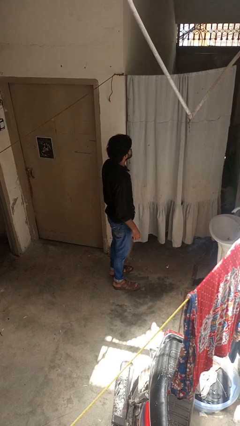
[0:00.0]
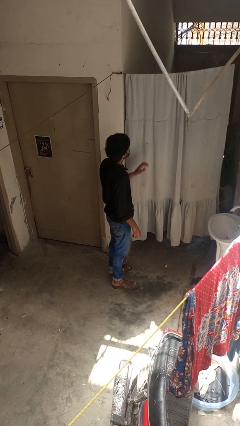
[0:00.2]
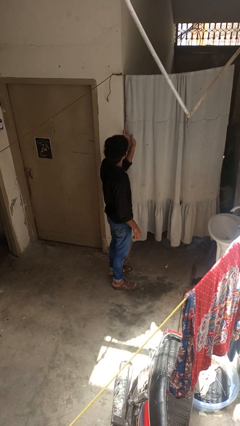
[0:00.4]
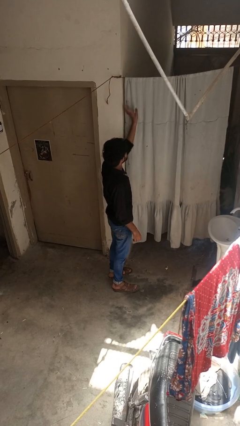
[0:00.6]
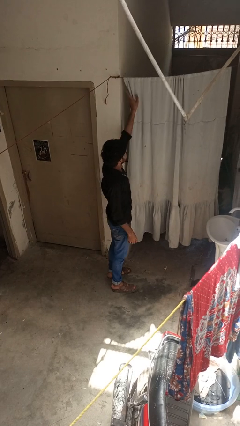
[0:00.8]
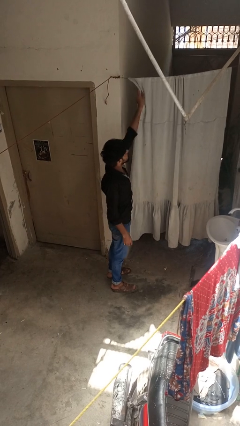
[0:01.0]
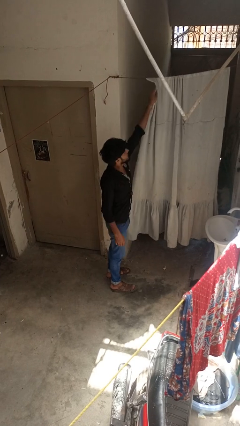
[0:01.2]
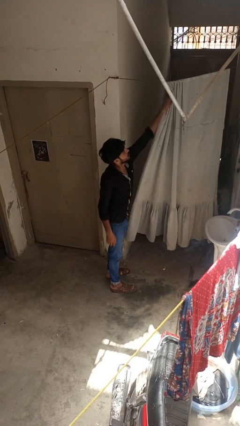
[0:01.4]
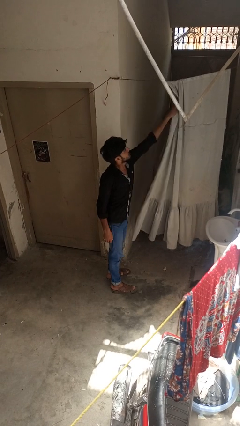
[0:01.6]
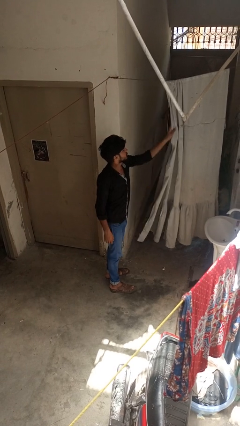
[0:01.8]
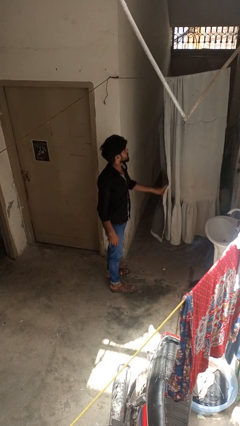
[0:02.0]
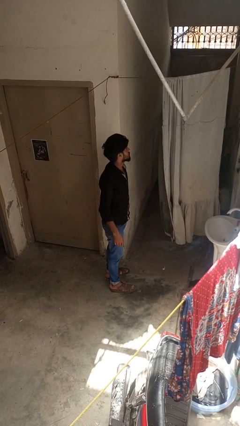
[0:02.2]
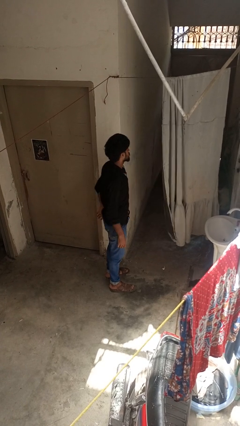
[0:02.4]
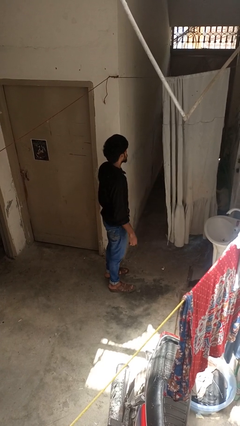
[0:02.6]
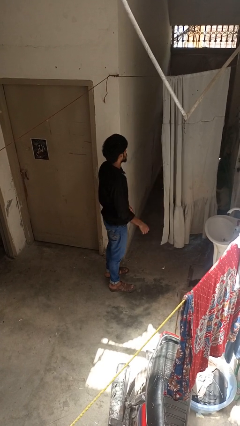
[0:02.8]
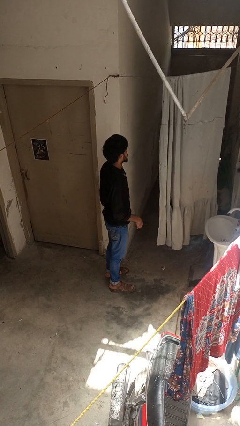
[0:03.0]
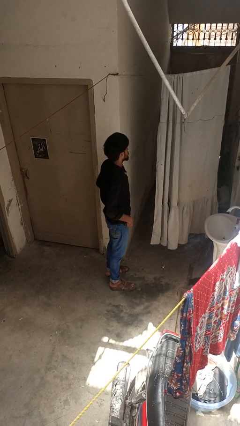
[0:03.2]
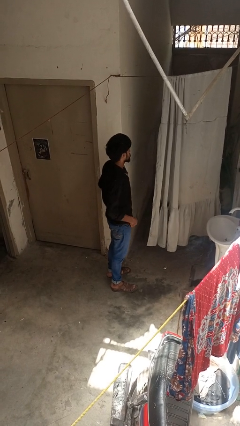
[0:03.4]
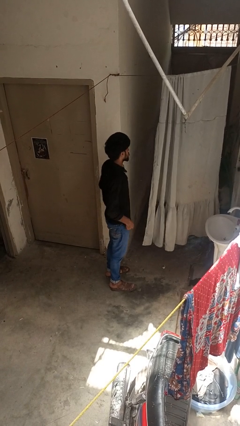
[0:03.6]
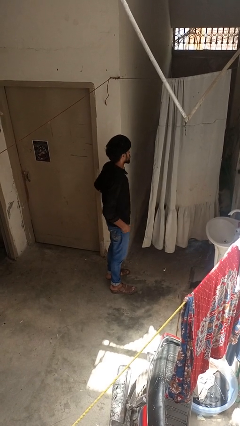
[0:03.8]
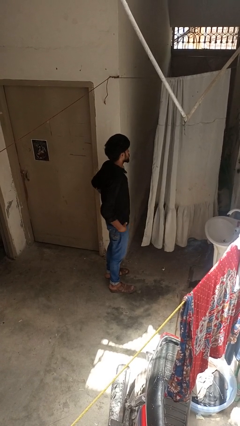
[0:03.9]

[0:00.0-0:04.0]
person opens curtains

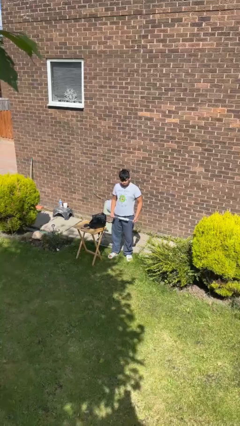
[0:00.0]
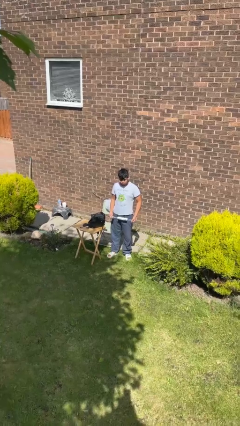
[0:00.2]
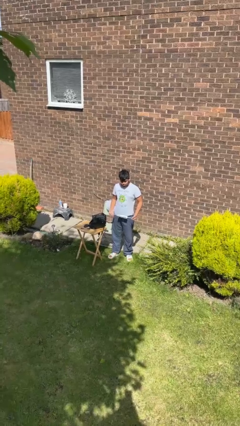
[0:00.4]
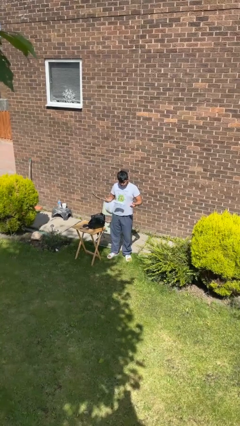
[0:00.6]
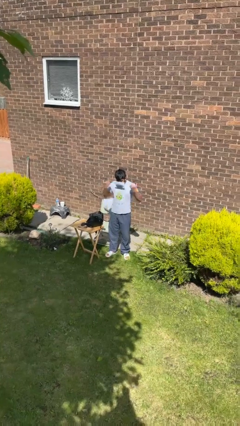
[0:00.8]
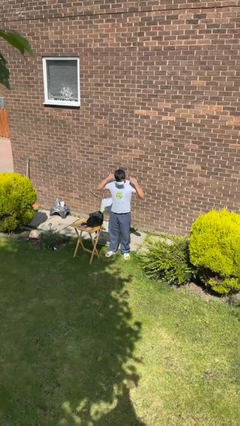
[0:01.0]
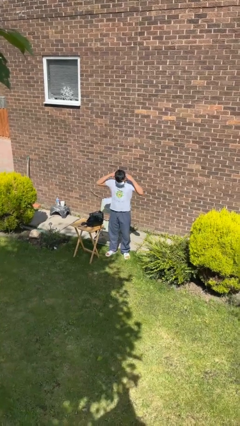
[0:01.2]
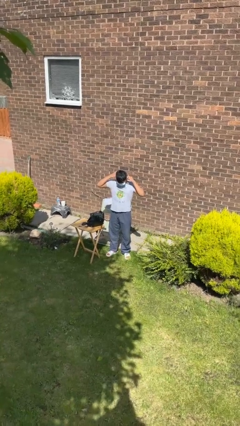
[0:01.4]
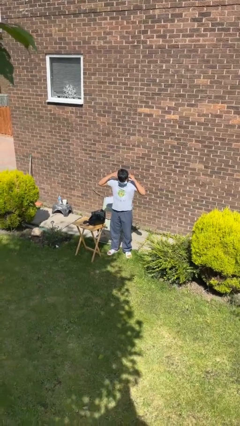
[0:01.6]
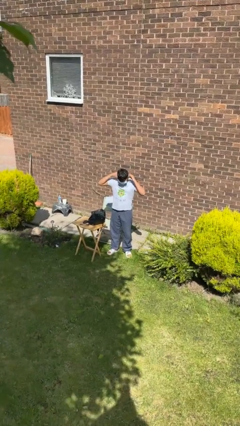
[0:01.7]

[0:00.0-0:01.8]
person puts on facemask

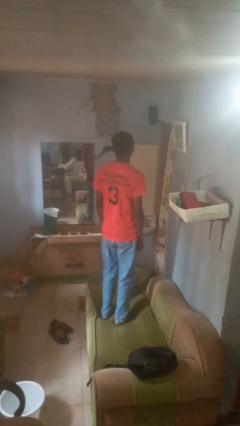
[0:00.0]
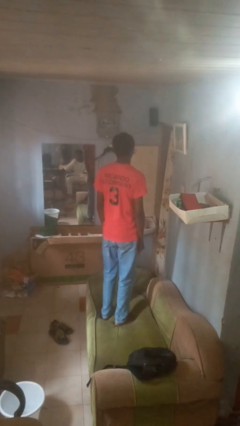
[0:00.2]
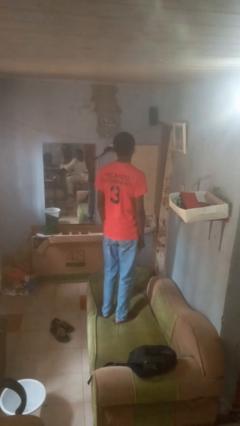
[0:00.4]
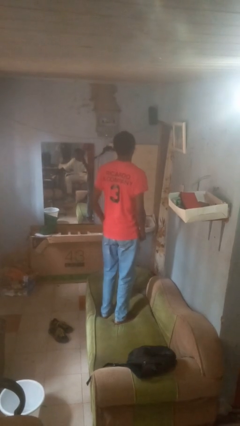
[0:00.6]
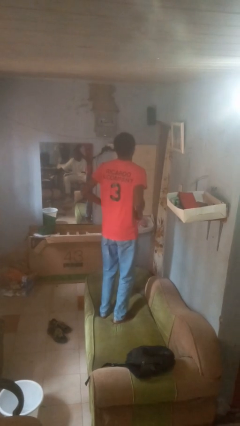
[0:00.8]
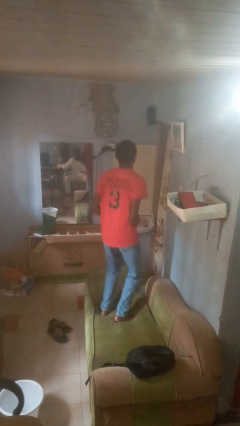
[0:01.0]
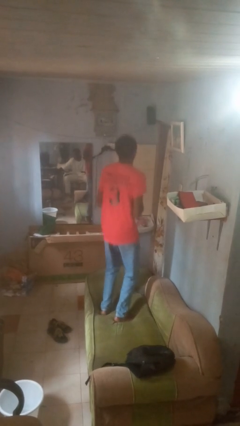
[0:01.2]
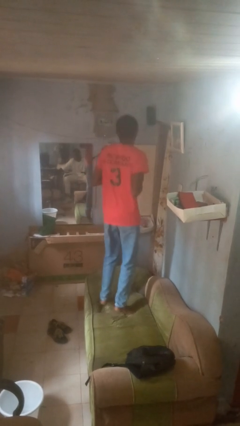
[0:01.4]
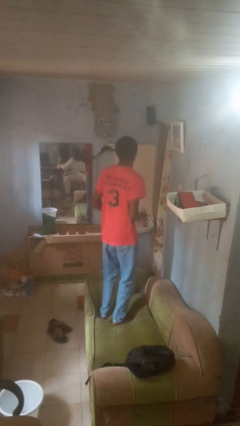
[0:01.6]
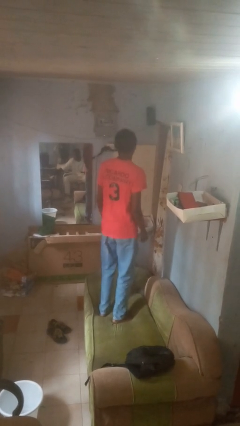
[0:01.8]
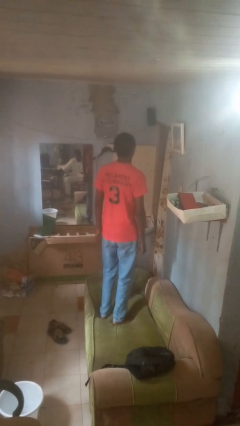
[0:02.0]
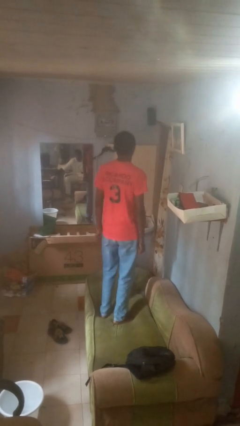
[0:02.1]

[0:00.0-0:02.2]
person jumps on couch

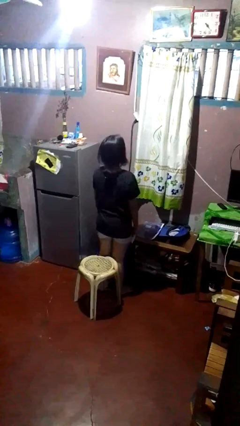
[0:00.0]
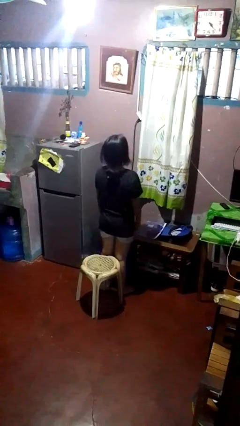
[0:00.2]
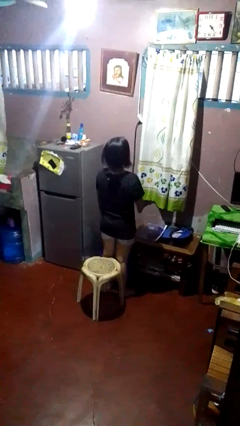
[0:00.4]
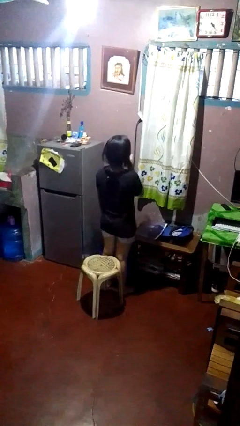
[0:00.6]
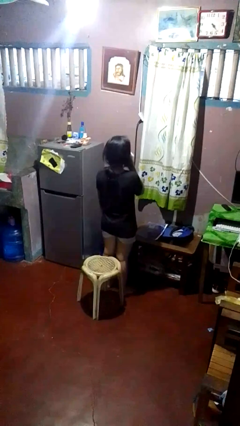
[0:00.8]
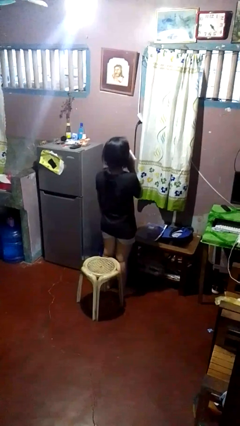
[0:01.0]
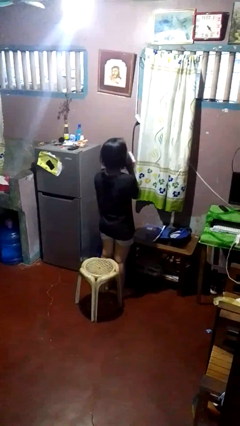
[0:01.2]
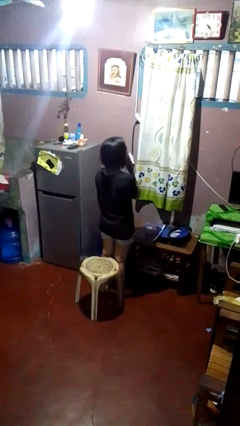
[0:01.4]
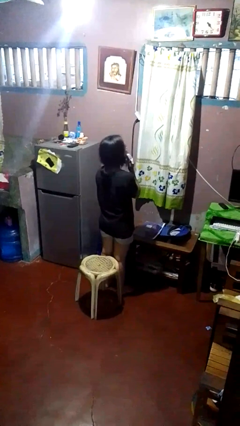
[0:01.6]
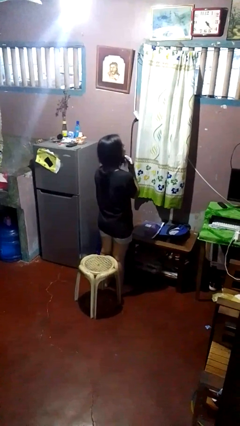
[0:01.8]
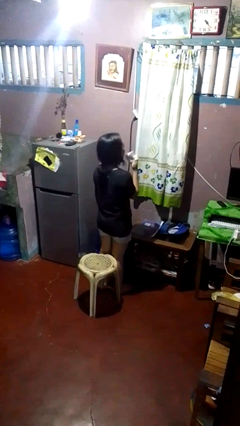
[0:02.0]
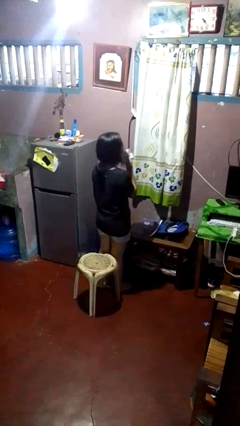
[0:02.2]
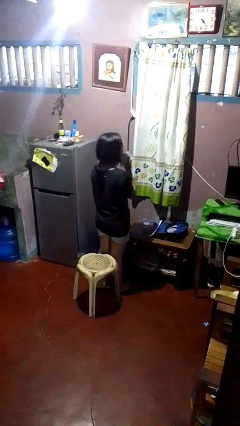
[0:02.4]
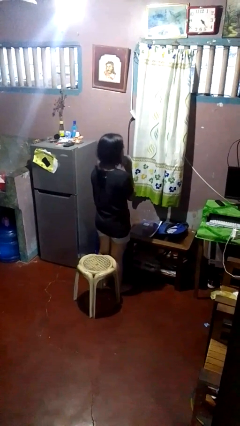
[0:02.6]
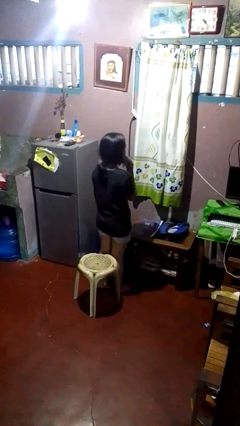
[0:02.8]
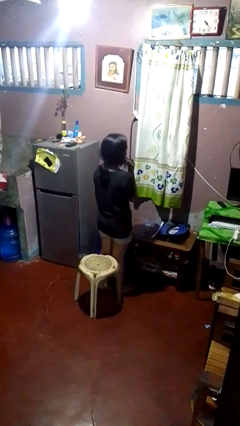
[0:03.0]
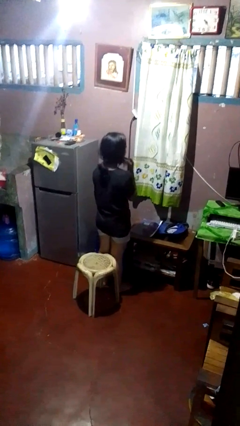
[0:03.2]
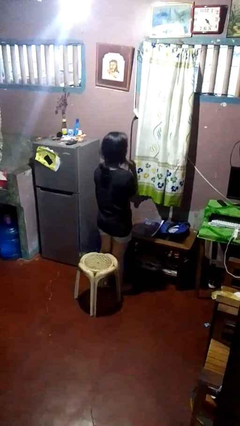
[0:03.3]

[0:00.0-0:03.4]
person wipes mouth with napkin

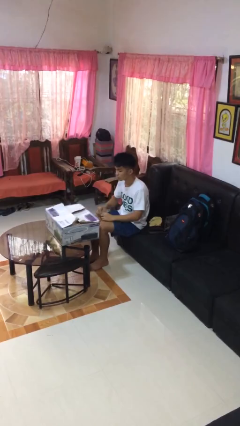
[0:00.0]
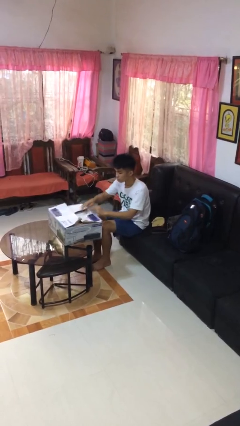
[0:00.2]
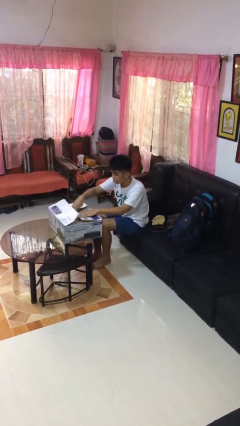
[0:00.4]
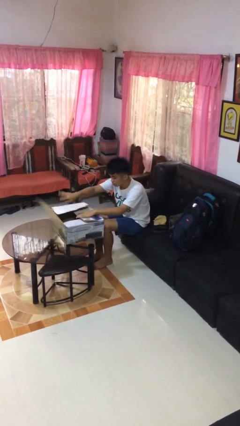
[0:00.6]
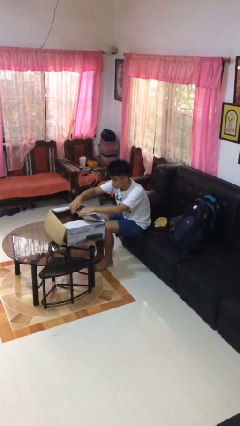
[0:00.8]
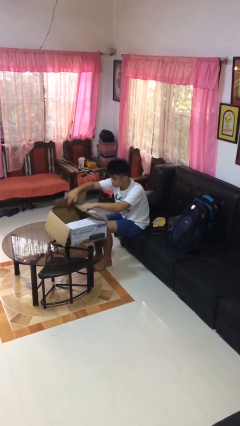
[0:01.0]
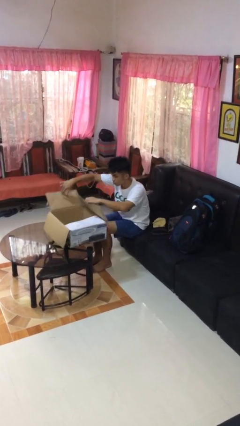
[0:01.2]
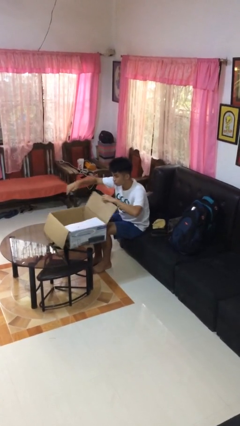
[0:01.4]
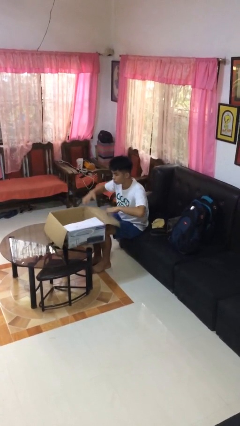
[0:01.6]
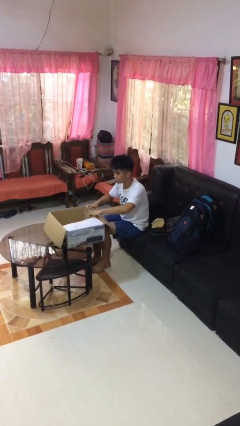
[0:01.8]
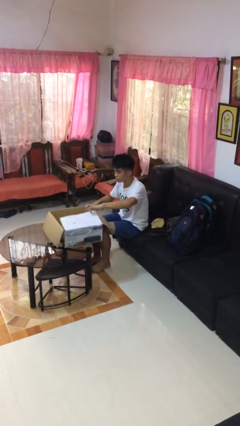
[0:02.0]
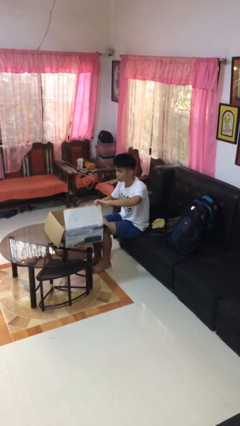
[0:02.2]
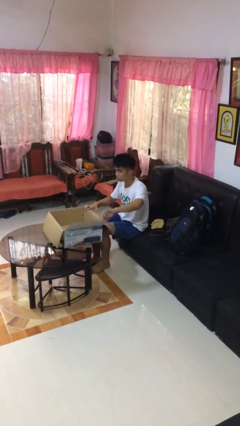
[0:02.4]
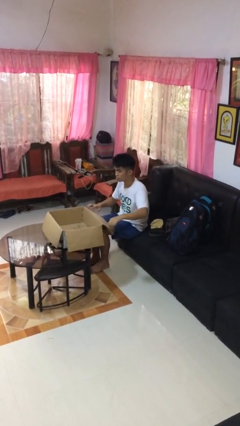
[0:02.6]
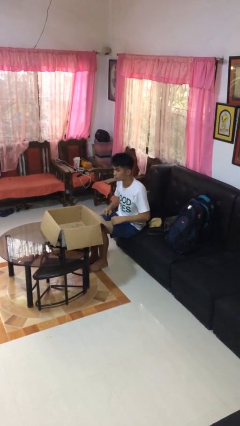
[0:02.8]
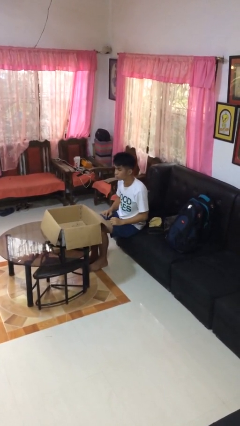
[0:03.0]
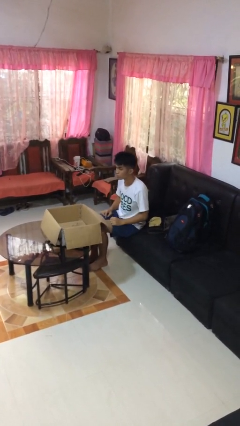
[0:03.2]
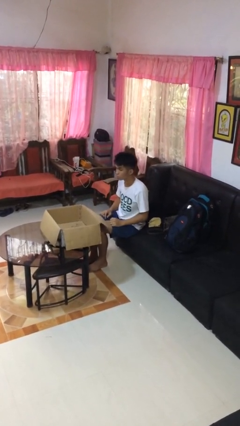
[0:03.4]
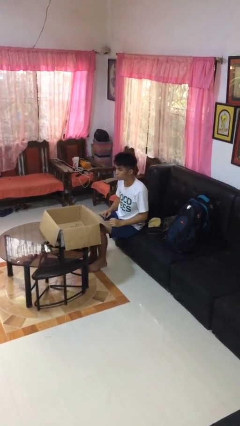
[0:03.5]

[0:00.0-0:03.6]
person opens box

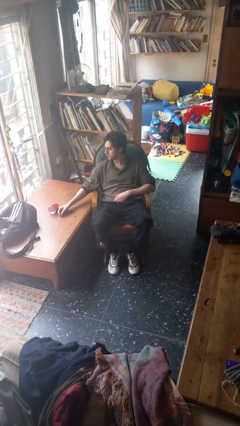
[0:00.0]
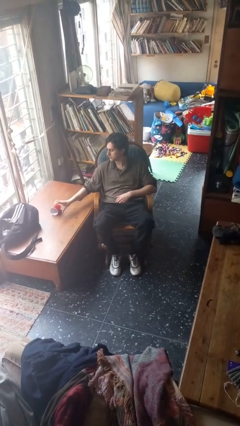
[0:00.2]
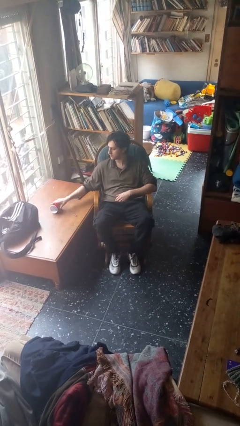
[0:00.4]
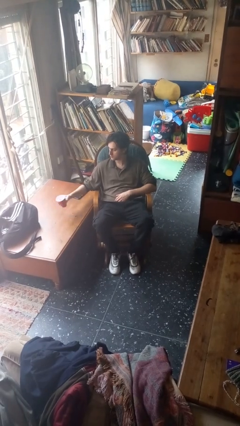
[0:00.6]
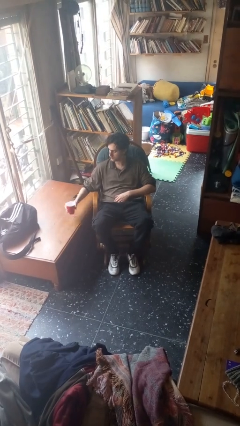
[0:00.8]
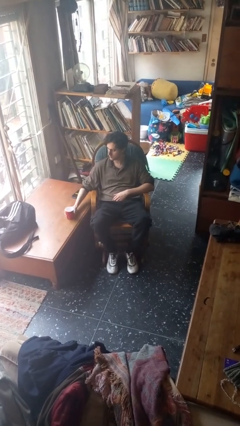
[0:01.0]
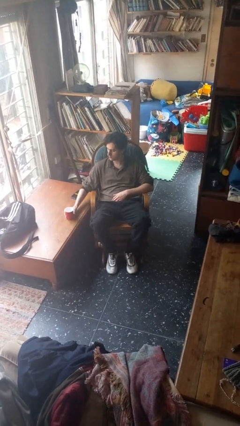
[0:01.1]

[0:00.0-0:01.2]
person sets upright glass

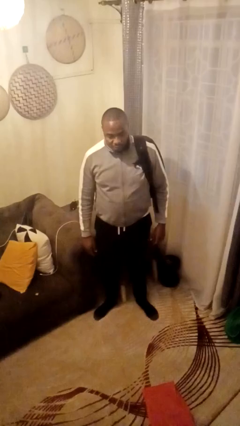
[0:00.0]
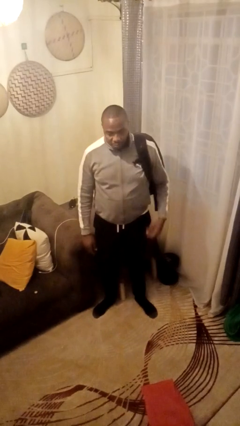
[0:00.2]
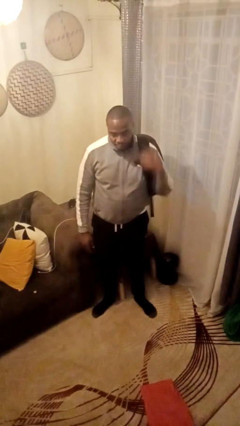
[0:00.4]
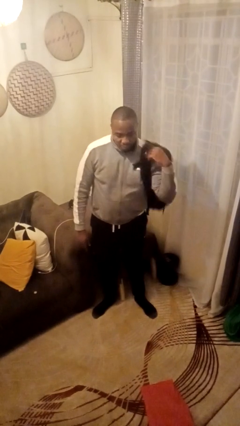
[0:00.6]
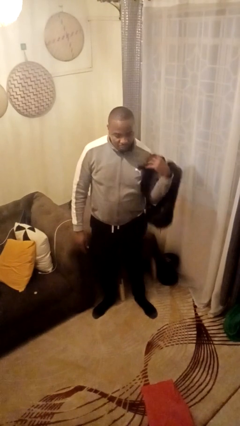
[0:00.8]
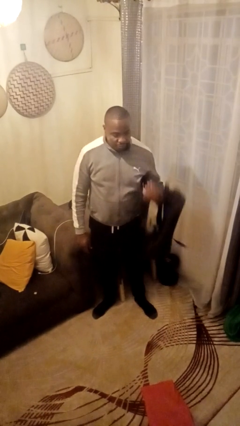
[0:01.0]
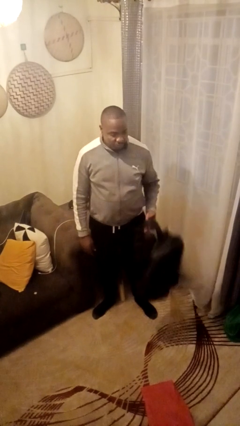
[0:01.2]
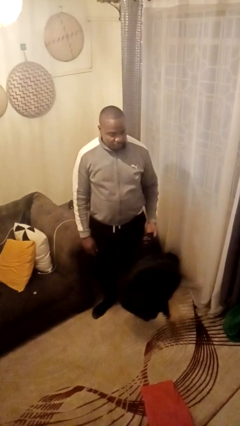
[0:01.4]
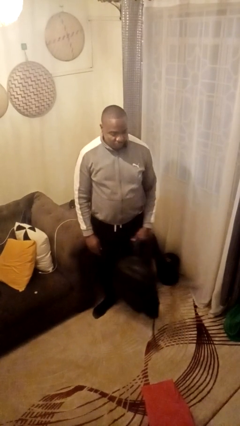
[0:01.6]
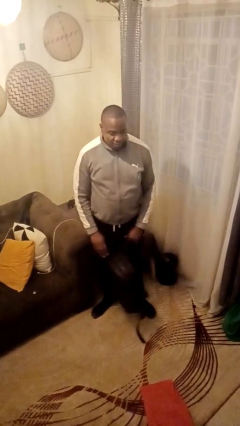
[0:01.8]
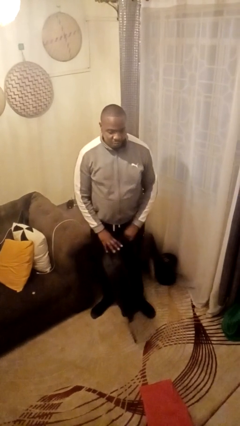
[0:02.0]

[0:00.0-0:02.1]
person takes off backpack
